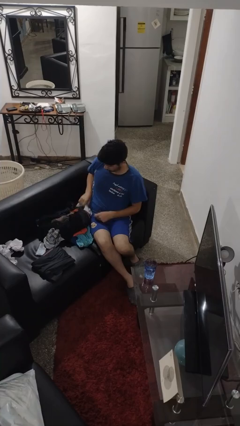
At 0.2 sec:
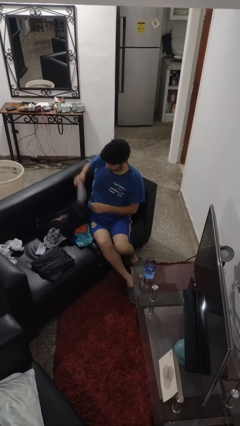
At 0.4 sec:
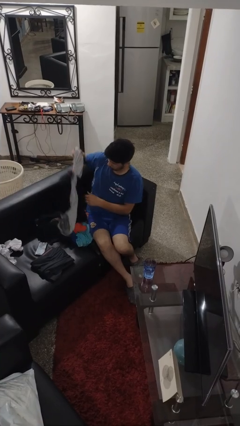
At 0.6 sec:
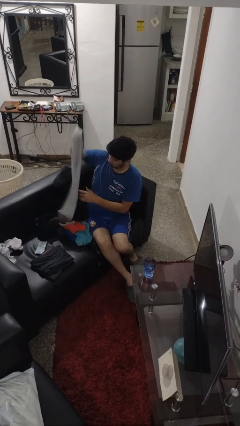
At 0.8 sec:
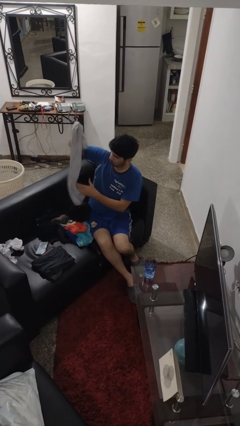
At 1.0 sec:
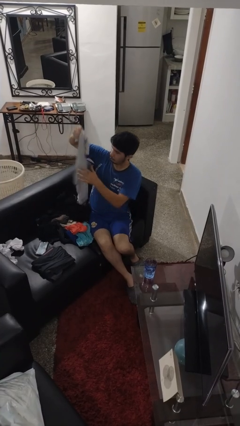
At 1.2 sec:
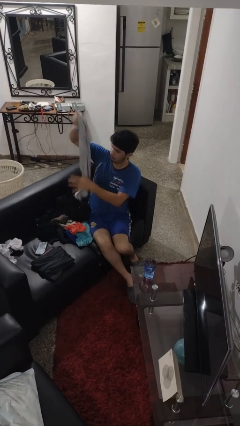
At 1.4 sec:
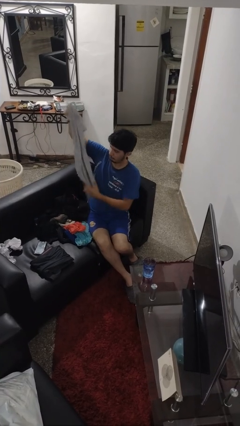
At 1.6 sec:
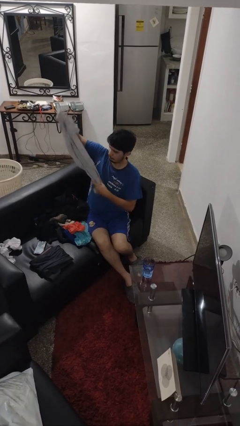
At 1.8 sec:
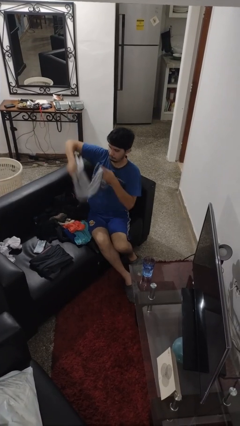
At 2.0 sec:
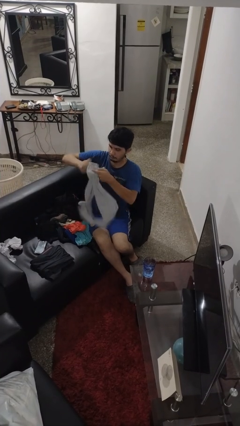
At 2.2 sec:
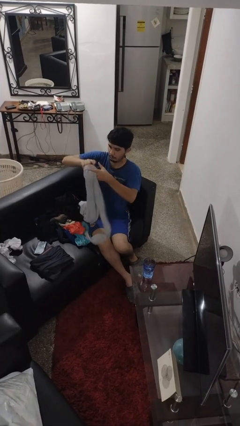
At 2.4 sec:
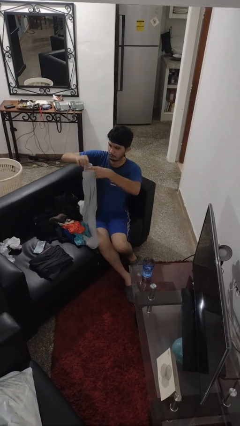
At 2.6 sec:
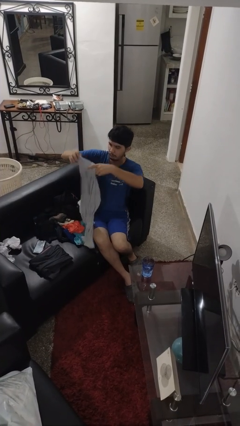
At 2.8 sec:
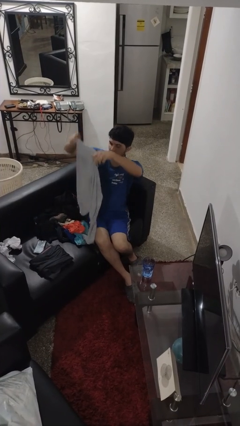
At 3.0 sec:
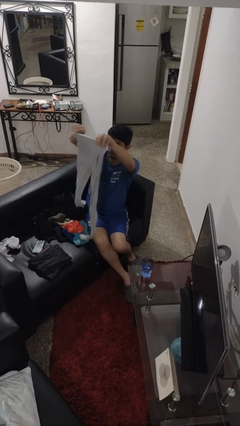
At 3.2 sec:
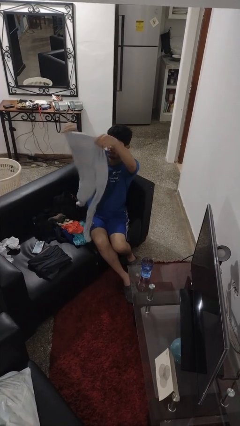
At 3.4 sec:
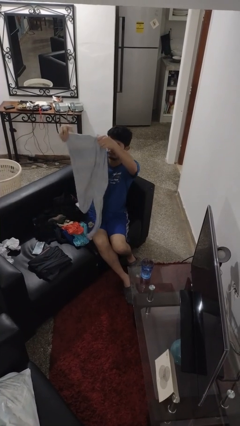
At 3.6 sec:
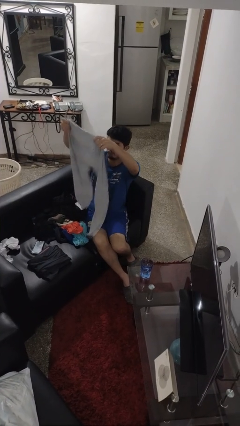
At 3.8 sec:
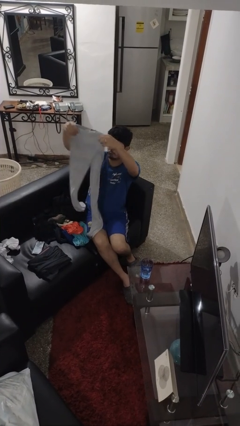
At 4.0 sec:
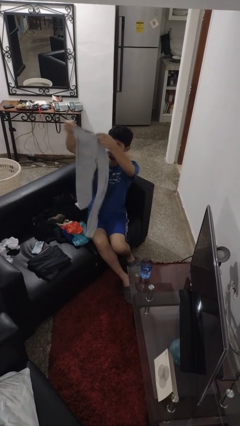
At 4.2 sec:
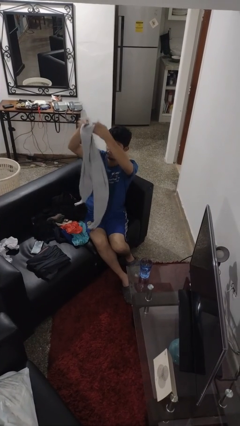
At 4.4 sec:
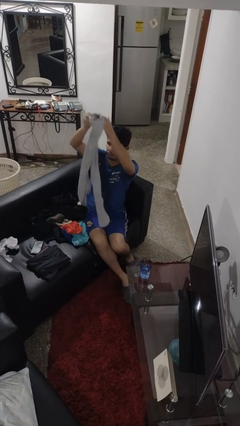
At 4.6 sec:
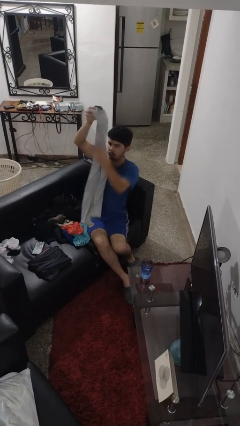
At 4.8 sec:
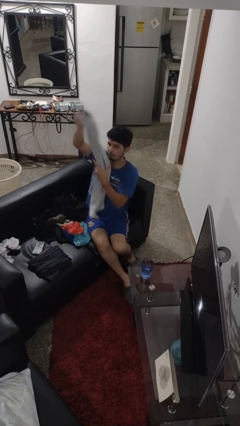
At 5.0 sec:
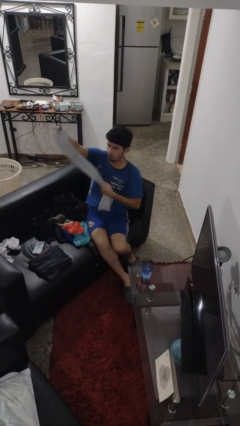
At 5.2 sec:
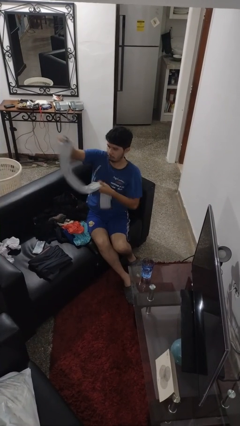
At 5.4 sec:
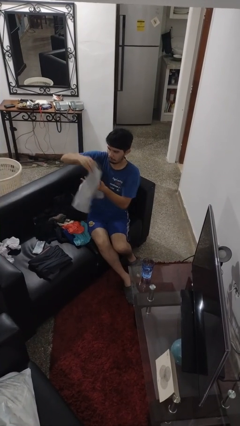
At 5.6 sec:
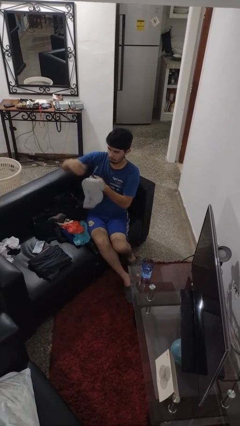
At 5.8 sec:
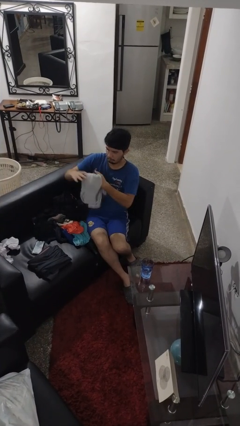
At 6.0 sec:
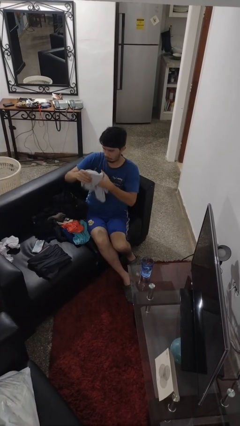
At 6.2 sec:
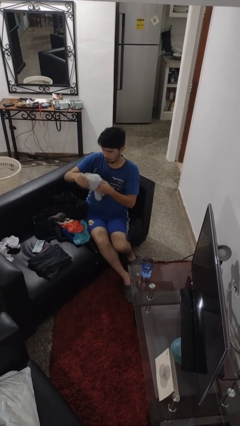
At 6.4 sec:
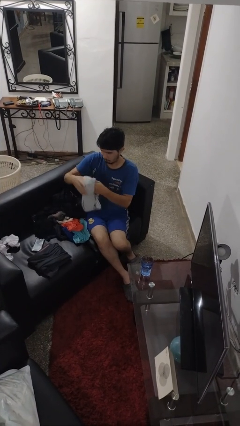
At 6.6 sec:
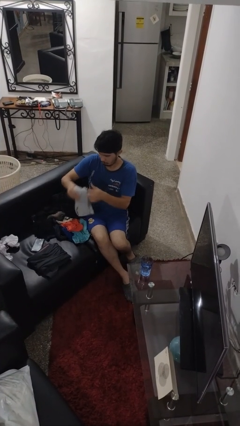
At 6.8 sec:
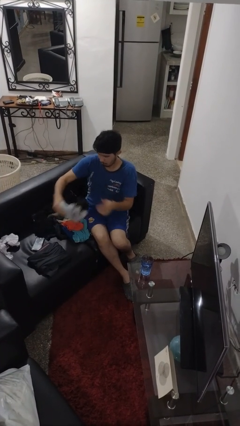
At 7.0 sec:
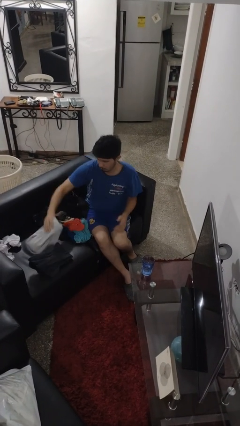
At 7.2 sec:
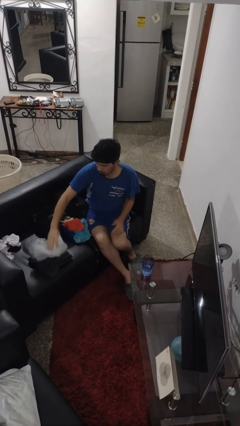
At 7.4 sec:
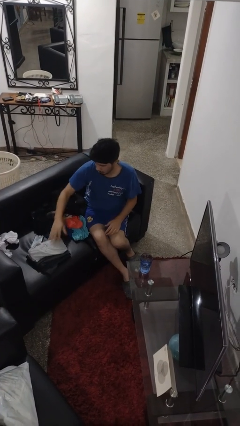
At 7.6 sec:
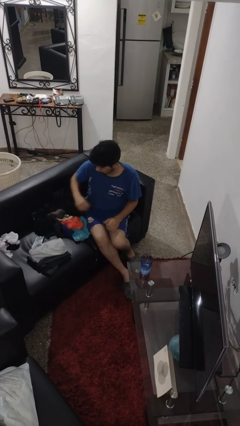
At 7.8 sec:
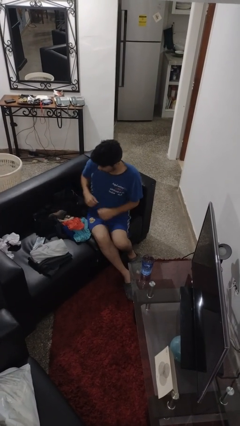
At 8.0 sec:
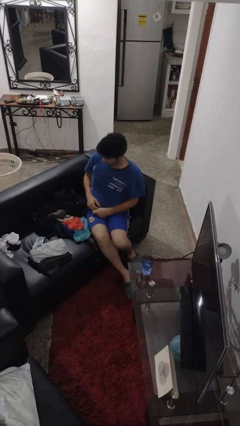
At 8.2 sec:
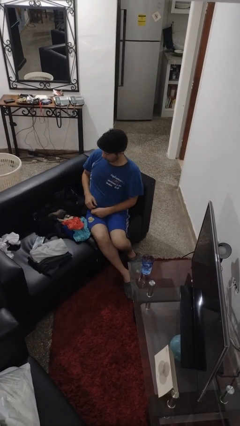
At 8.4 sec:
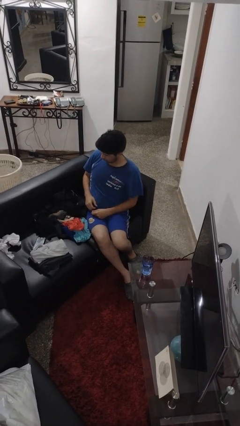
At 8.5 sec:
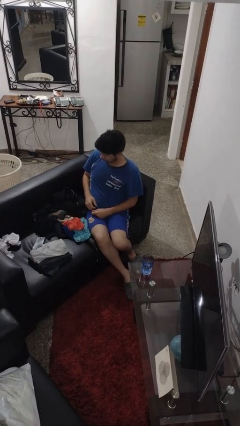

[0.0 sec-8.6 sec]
person folds pants

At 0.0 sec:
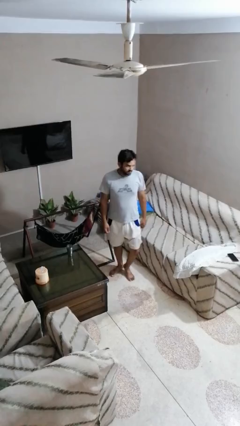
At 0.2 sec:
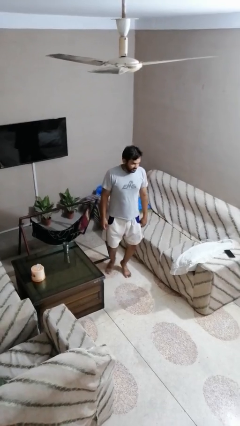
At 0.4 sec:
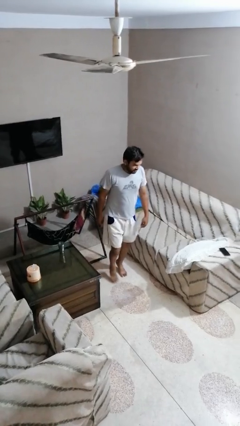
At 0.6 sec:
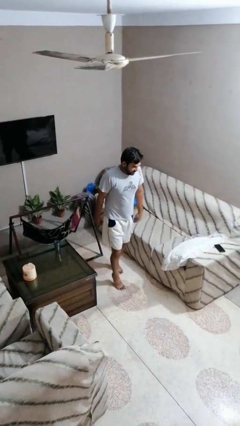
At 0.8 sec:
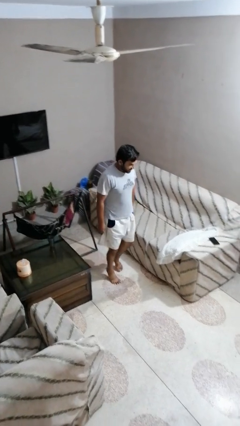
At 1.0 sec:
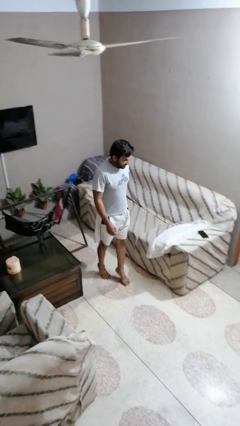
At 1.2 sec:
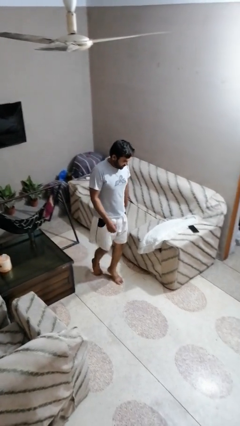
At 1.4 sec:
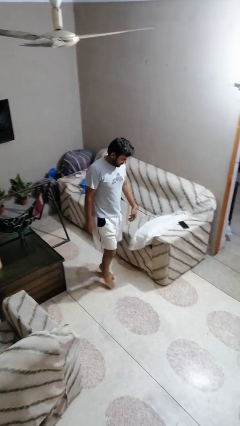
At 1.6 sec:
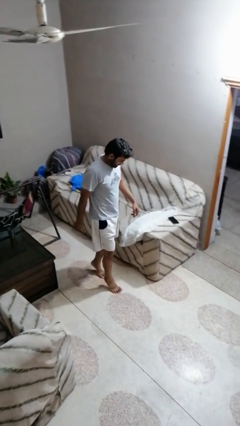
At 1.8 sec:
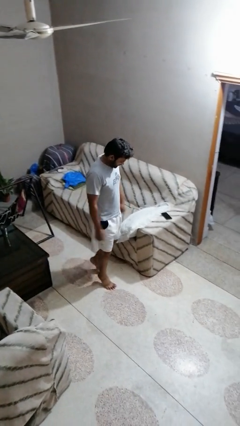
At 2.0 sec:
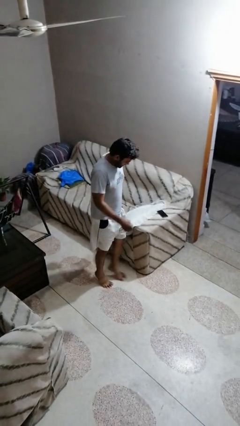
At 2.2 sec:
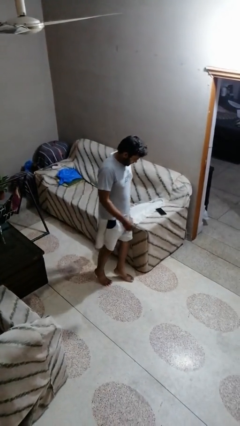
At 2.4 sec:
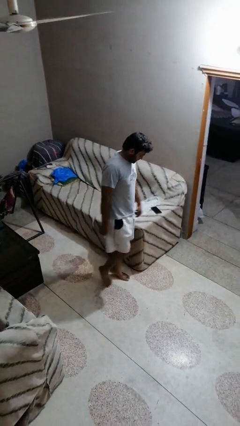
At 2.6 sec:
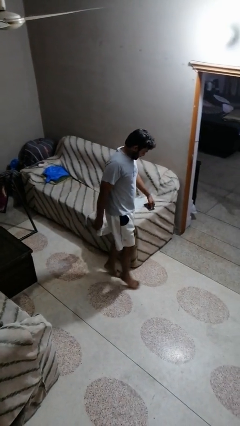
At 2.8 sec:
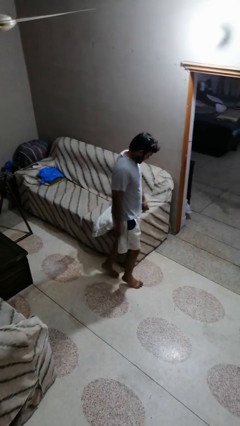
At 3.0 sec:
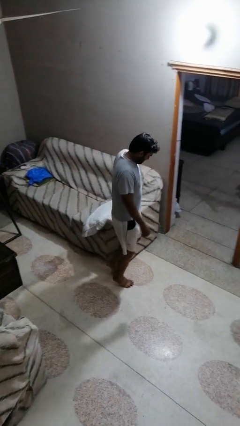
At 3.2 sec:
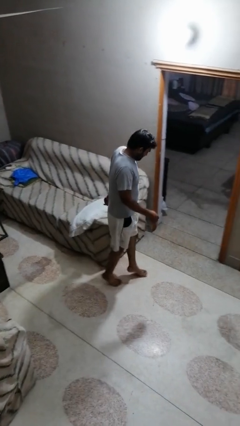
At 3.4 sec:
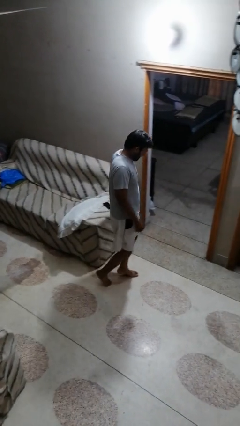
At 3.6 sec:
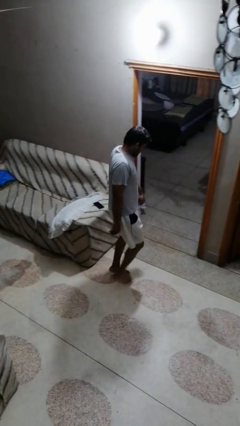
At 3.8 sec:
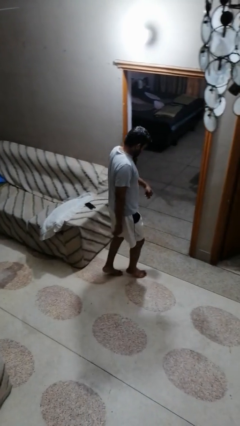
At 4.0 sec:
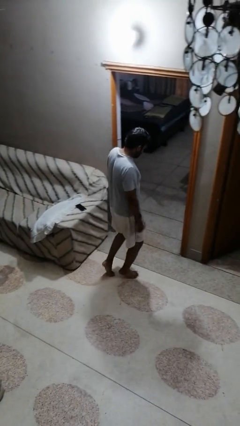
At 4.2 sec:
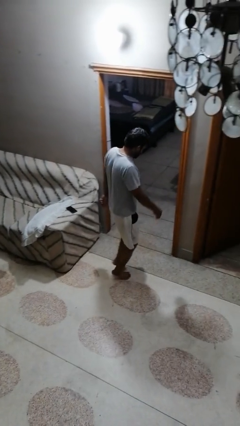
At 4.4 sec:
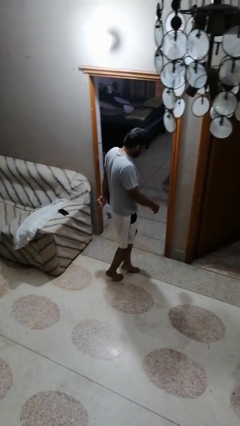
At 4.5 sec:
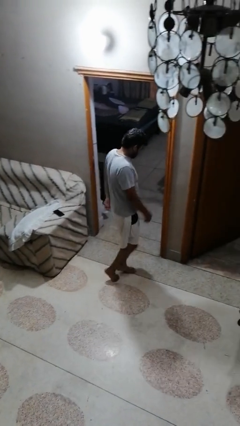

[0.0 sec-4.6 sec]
person walks tiptoe

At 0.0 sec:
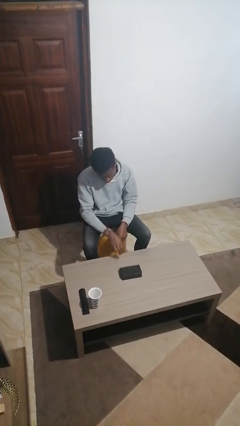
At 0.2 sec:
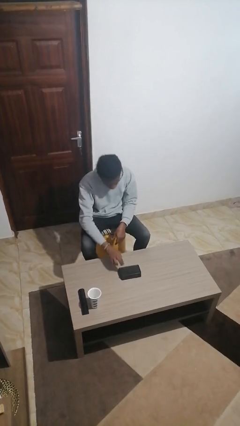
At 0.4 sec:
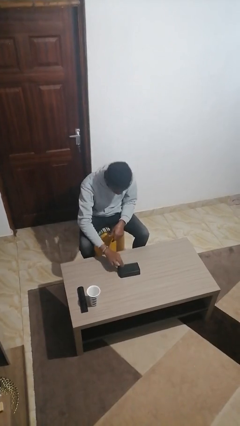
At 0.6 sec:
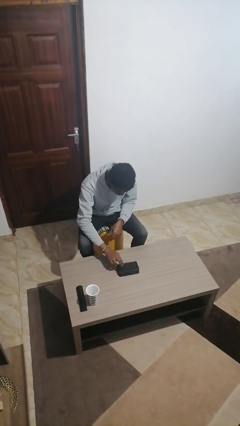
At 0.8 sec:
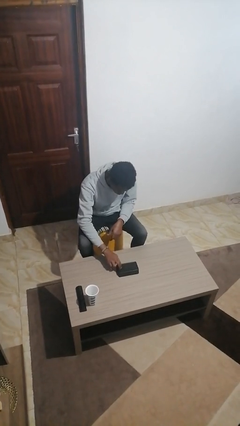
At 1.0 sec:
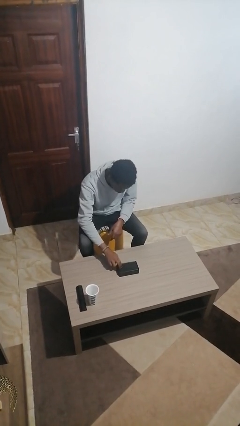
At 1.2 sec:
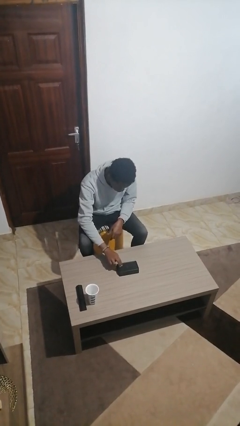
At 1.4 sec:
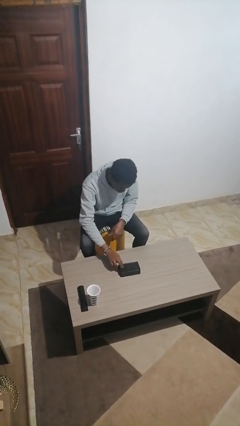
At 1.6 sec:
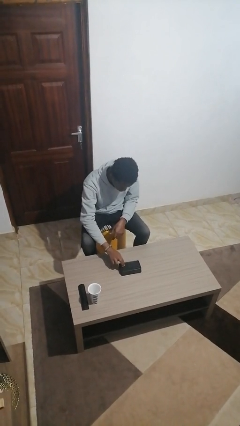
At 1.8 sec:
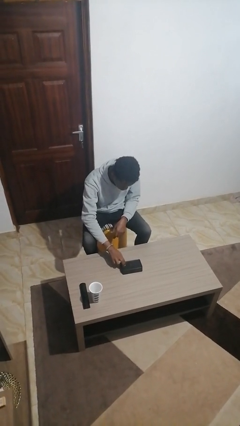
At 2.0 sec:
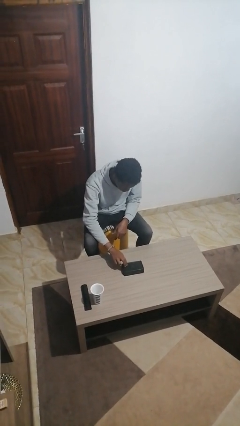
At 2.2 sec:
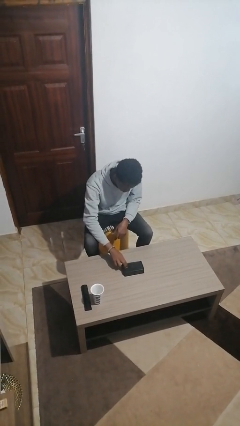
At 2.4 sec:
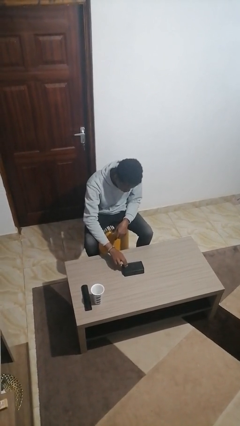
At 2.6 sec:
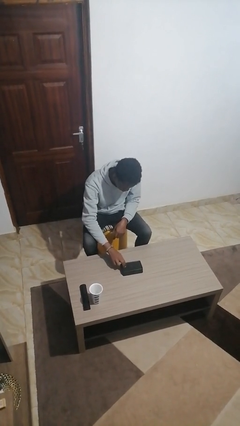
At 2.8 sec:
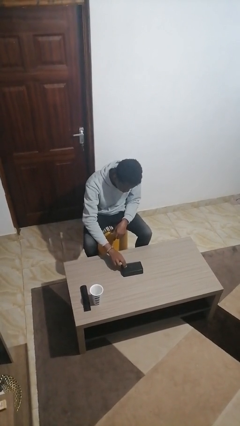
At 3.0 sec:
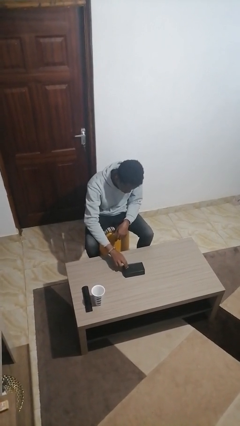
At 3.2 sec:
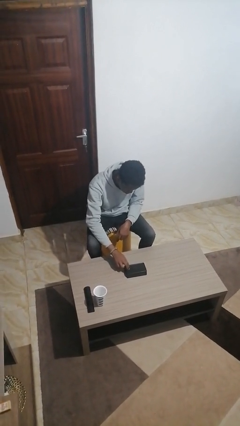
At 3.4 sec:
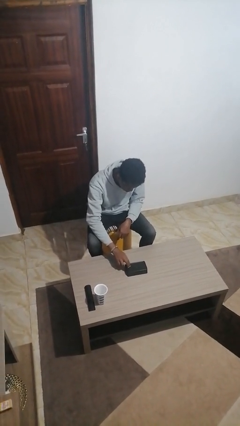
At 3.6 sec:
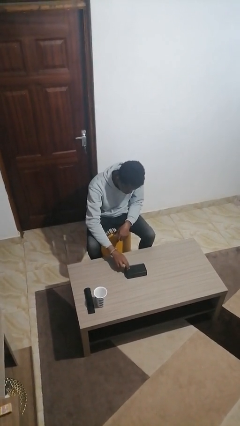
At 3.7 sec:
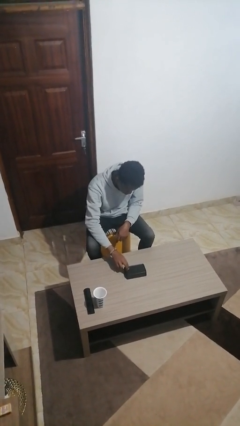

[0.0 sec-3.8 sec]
person taps object with finger

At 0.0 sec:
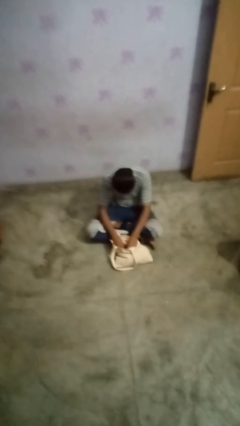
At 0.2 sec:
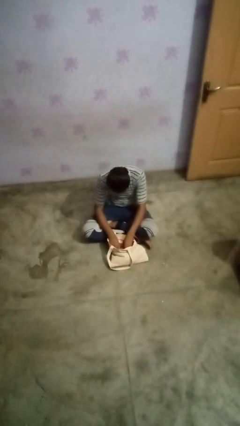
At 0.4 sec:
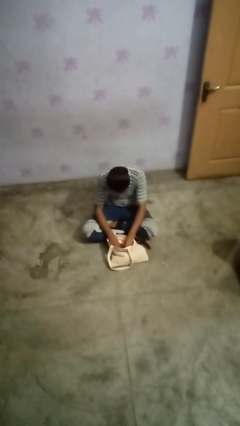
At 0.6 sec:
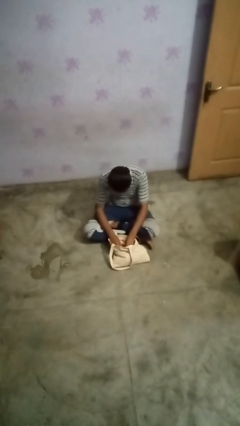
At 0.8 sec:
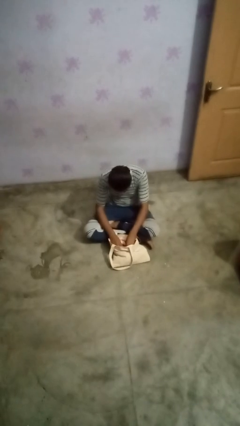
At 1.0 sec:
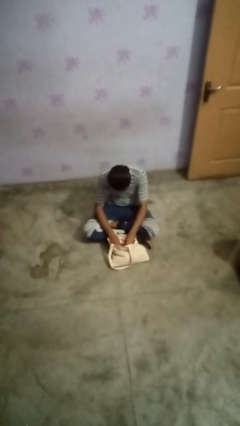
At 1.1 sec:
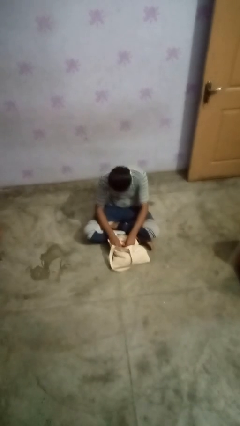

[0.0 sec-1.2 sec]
person searches in bag
